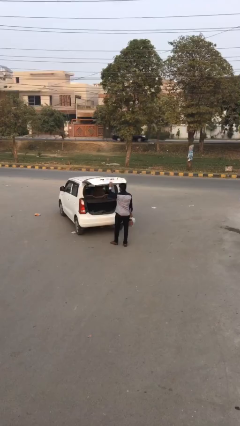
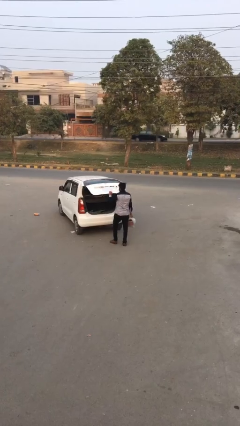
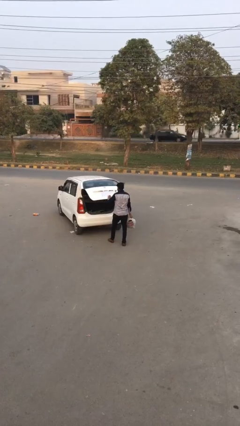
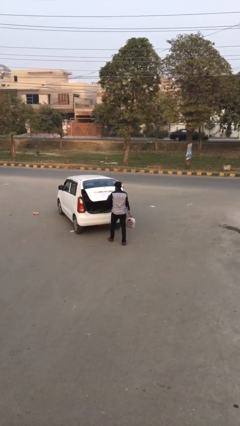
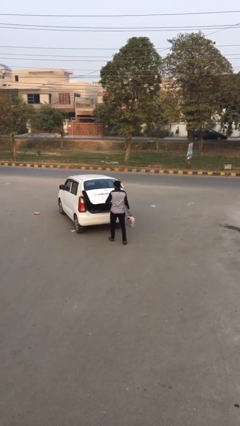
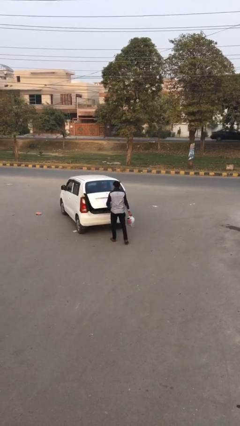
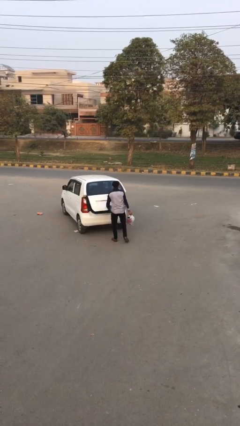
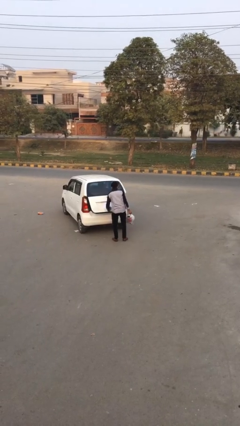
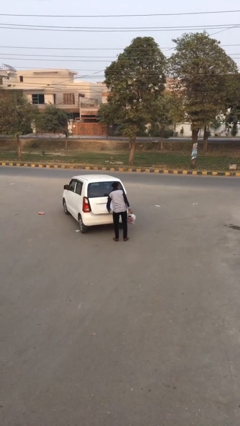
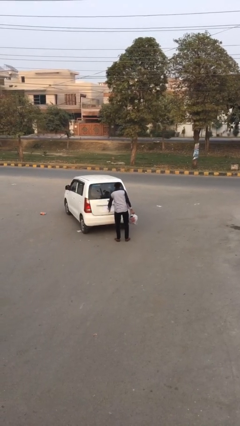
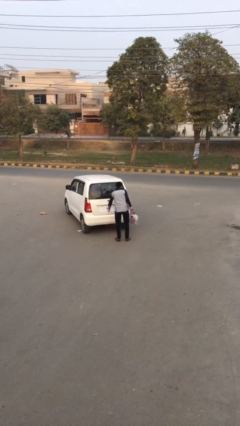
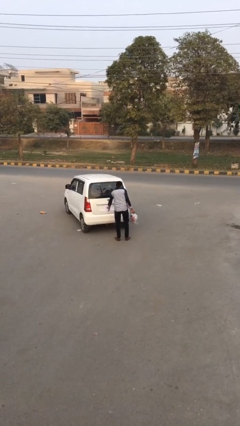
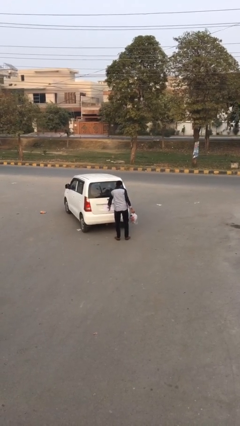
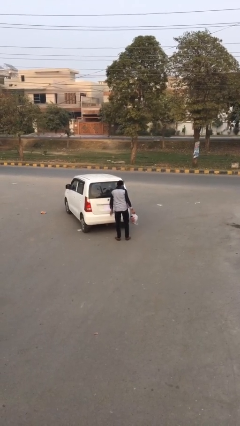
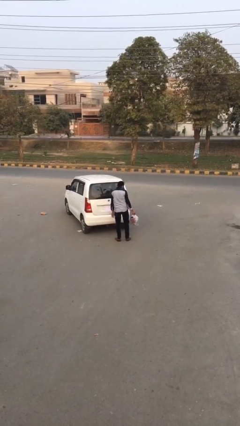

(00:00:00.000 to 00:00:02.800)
person closes car trunk

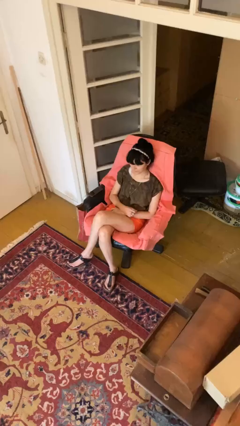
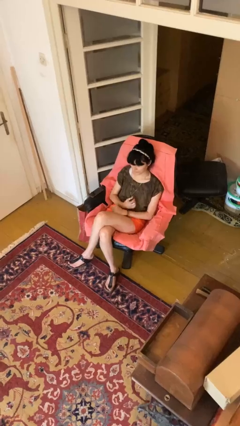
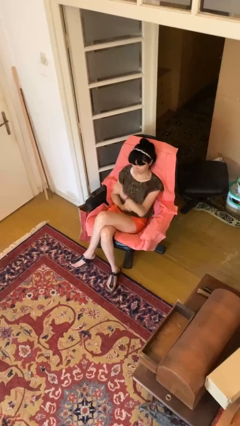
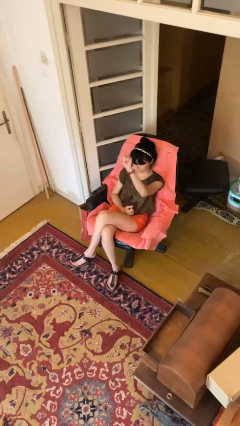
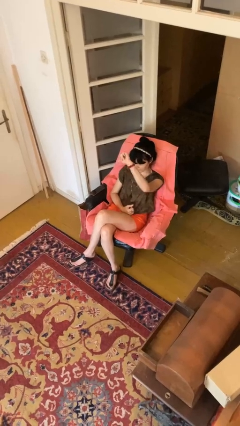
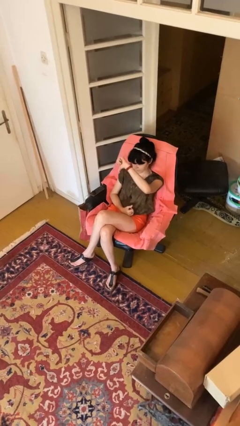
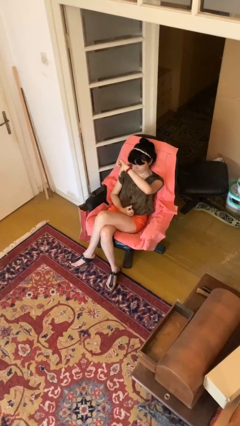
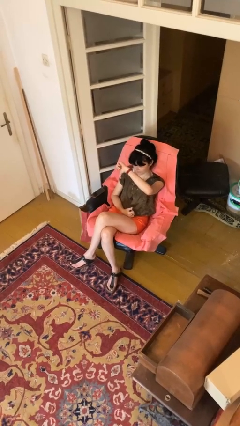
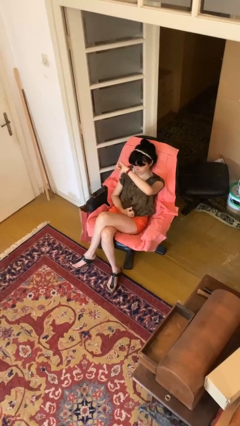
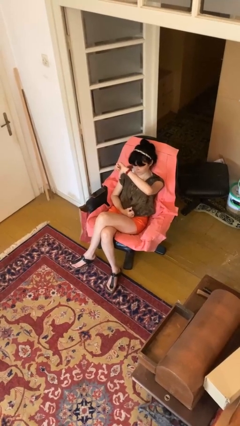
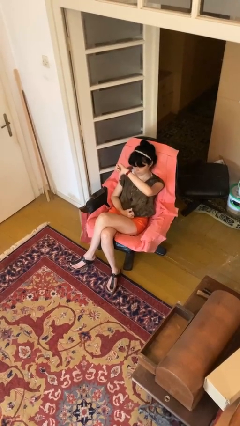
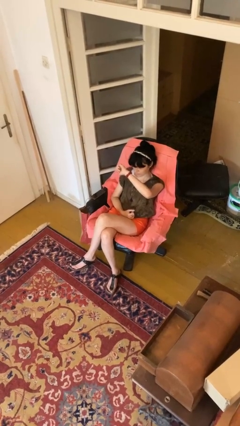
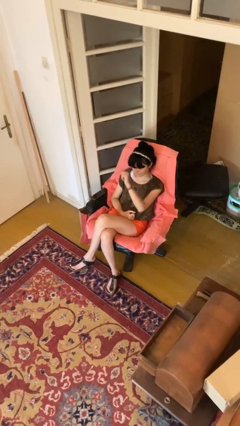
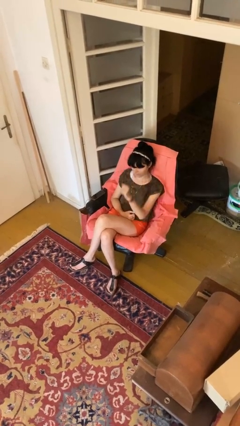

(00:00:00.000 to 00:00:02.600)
person gestures thumbs down

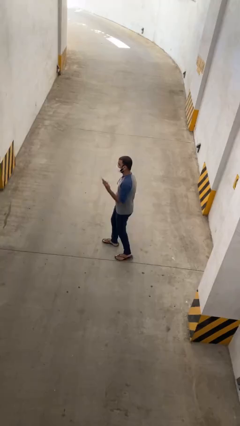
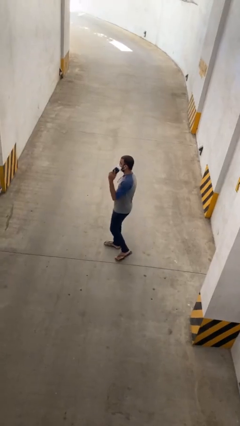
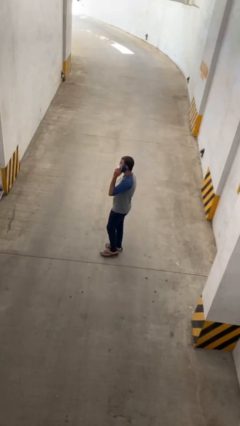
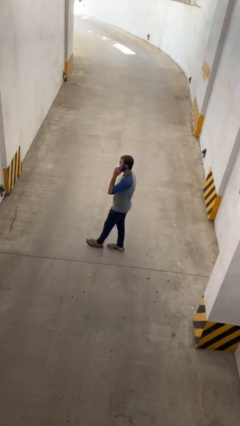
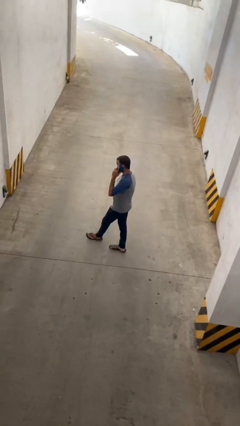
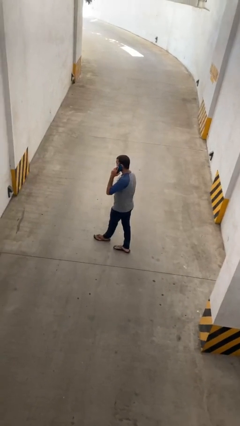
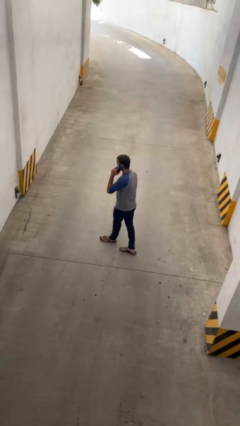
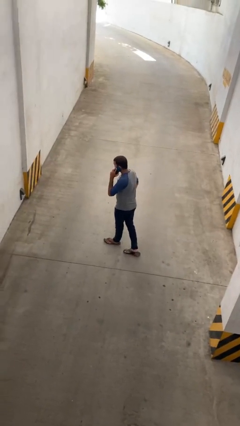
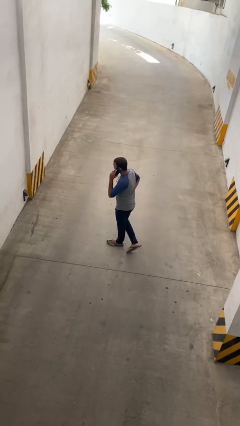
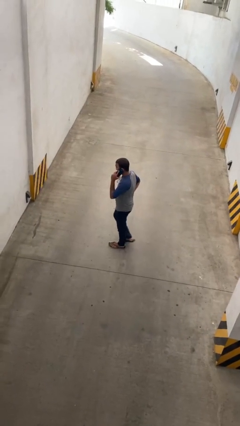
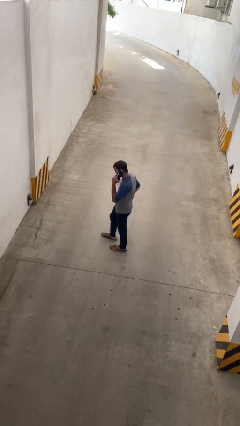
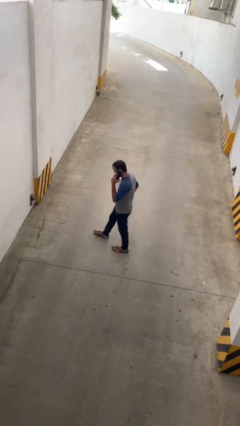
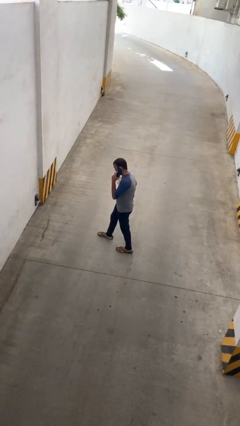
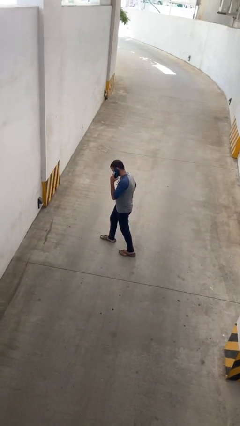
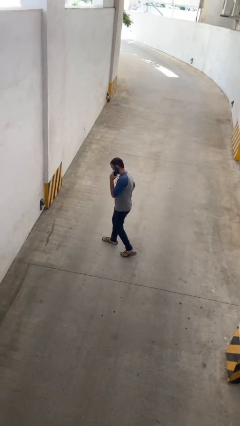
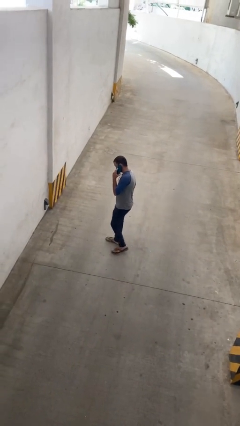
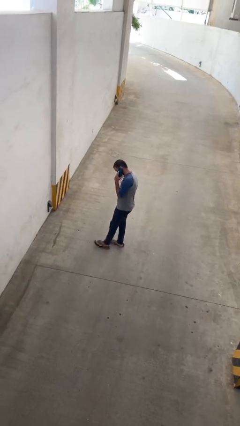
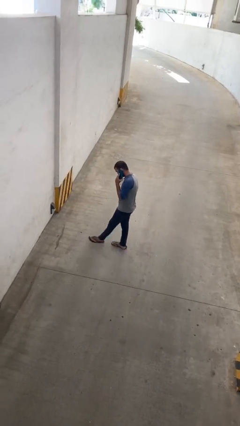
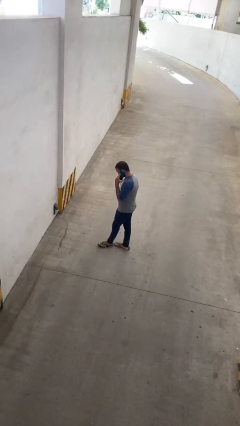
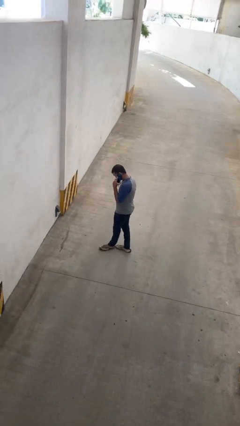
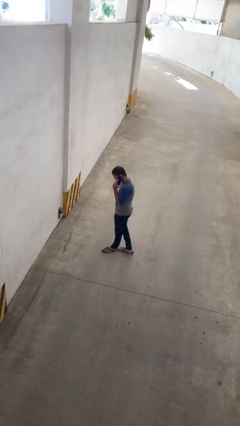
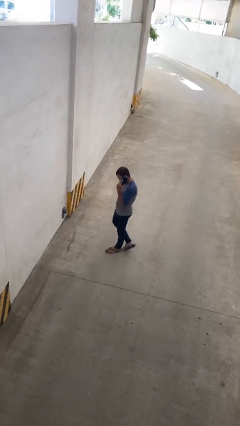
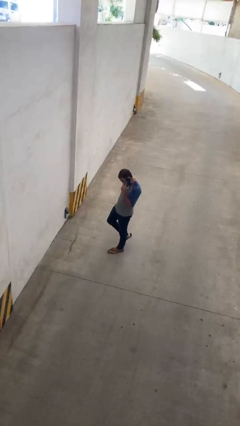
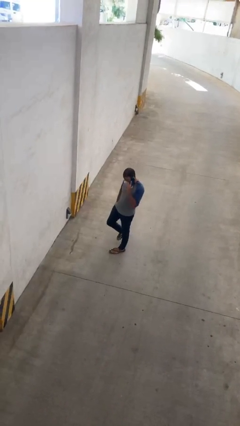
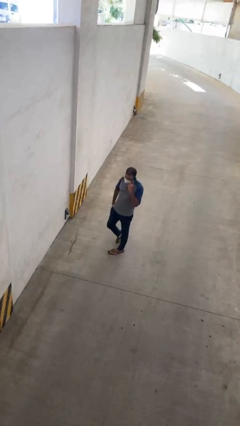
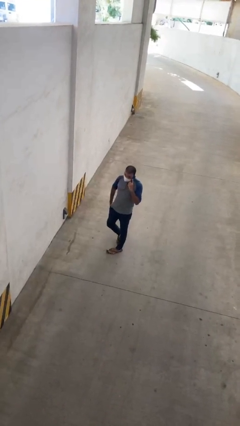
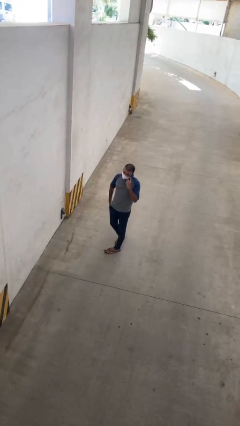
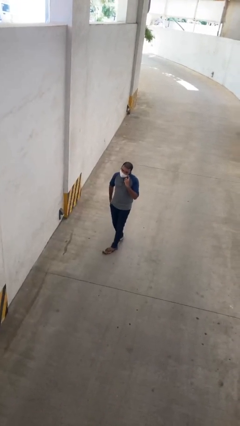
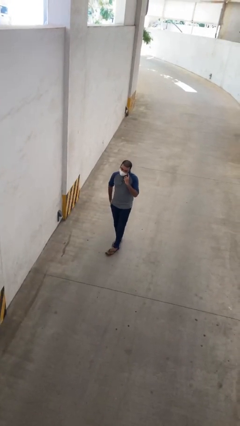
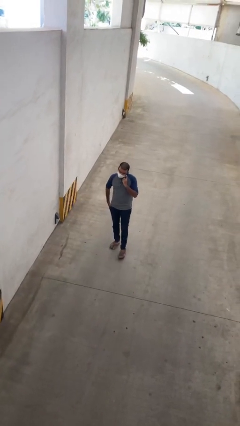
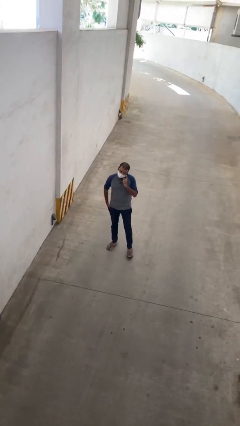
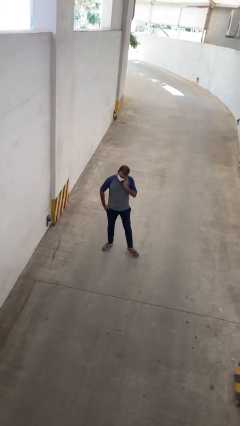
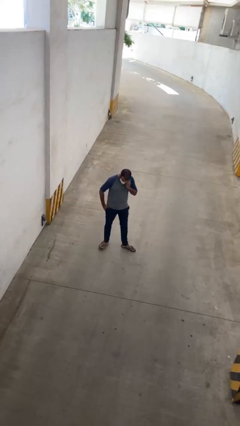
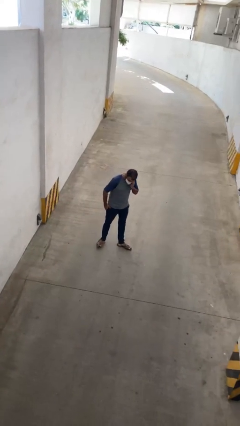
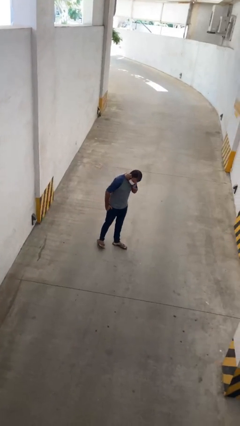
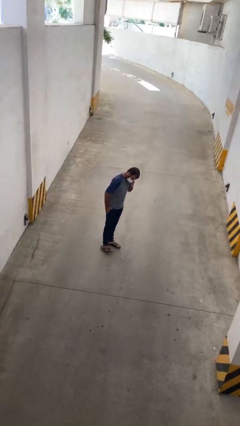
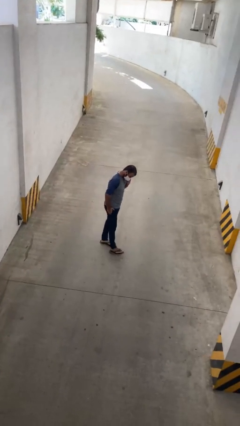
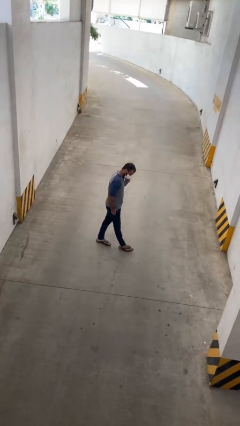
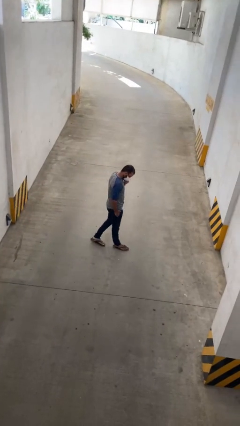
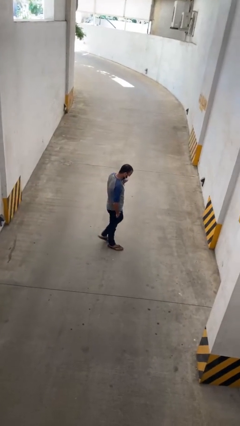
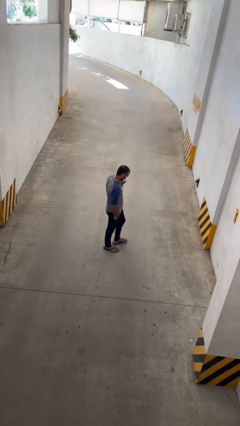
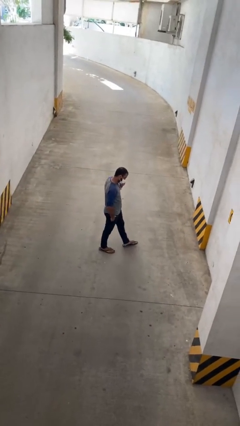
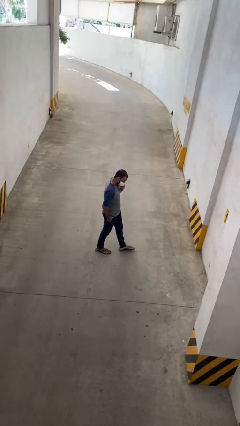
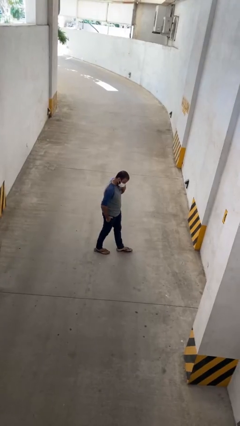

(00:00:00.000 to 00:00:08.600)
person talks on phone

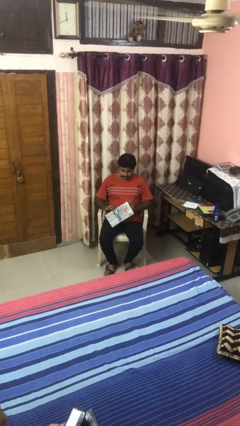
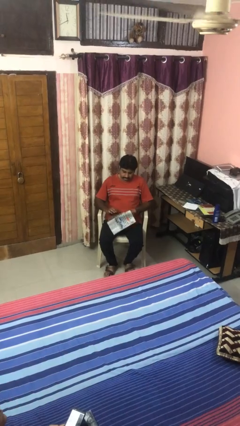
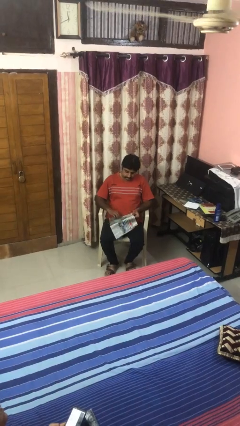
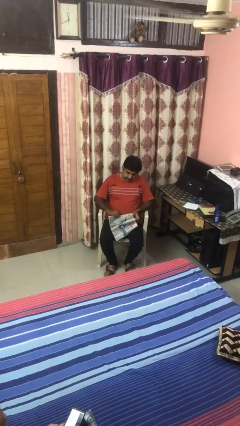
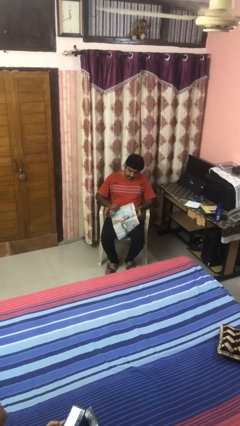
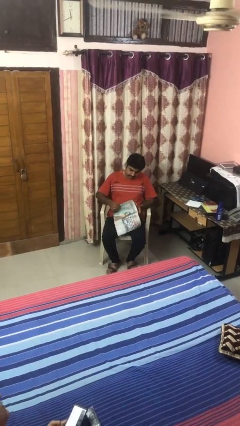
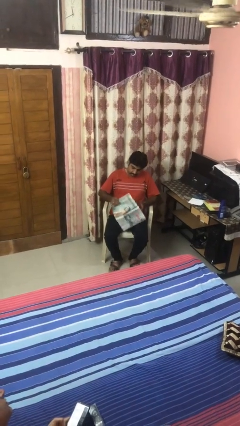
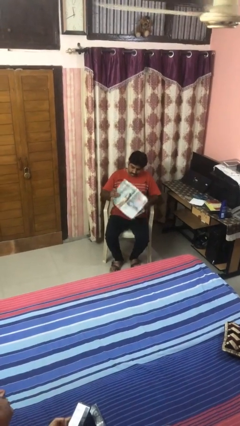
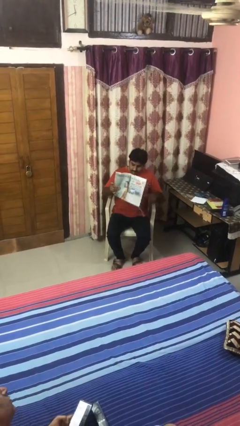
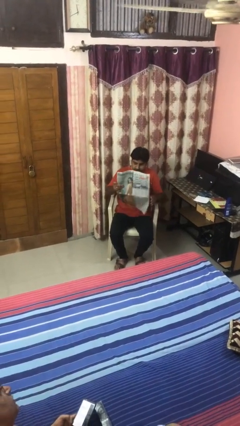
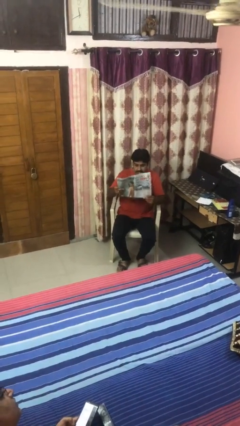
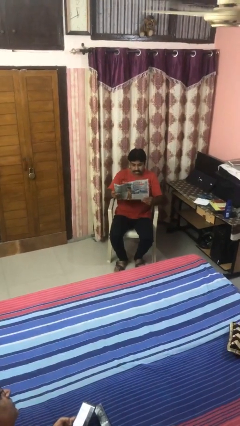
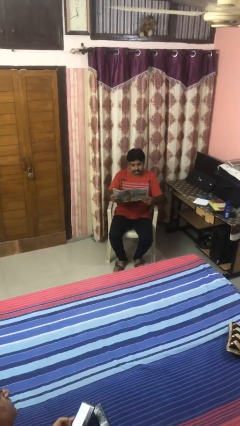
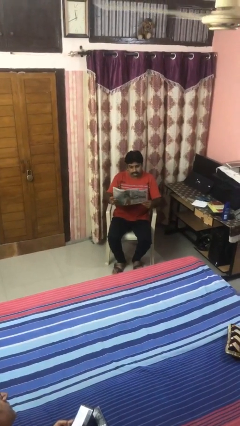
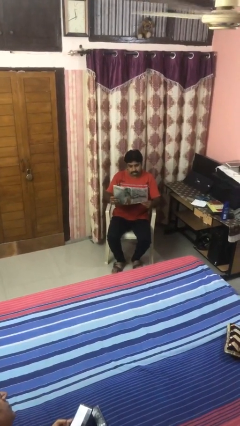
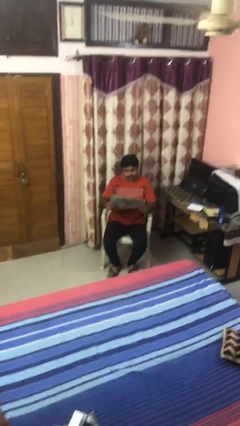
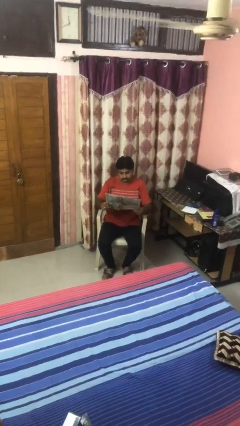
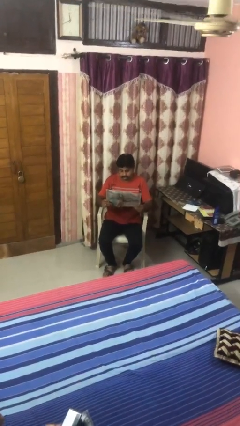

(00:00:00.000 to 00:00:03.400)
person reads newspaper

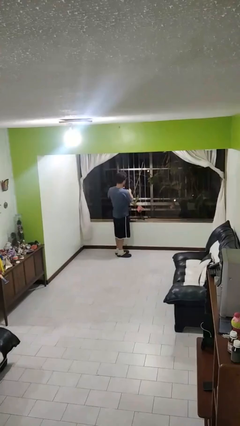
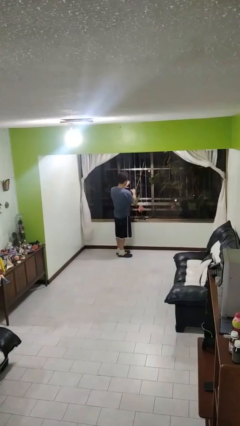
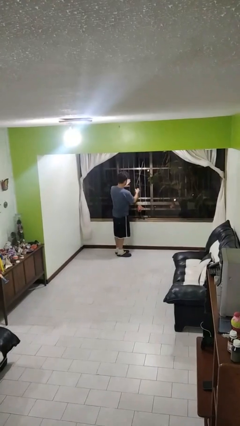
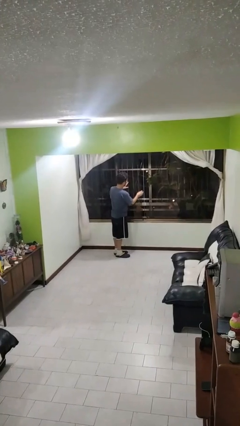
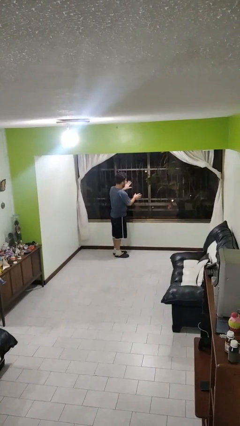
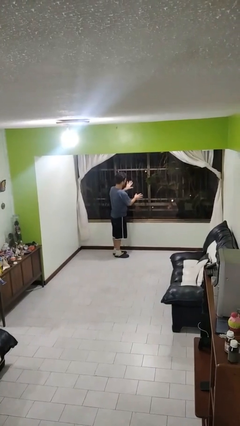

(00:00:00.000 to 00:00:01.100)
person closes home window
